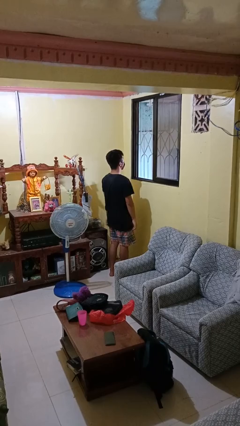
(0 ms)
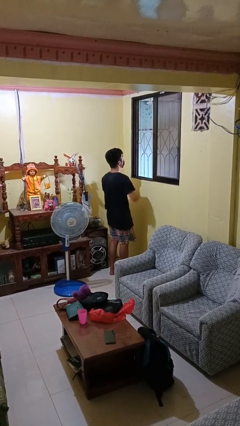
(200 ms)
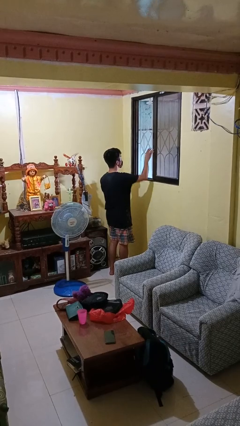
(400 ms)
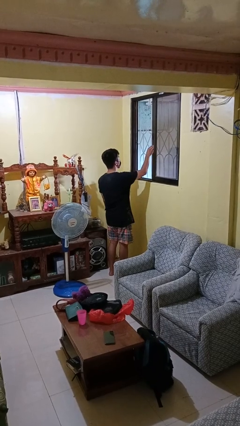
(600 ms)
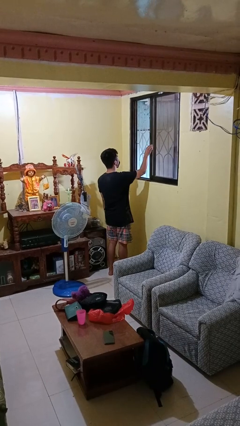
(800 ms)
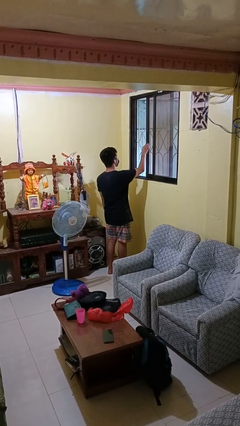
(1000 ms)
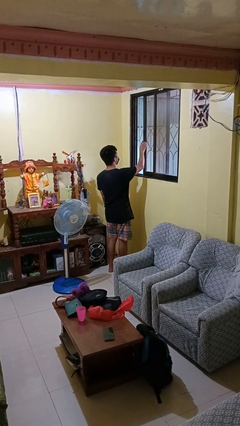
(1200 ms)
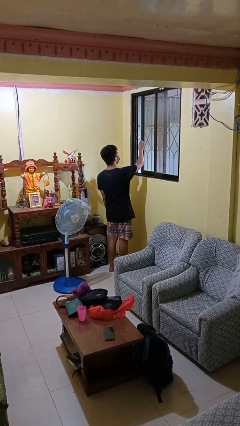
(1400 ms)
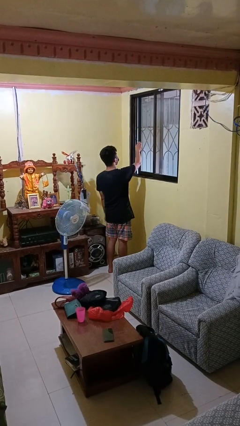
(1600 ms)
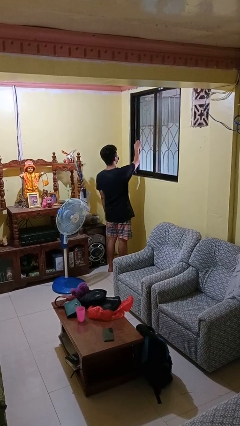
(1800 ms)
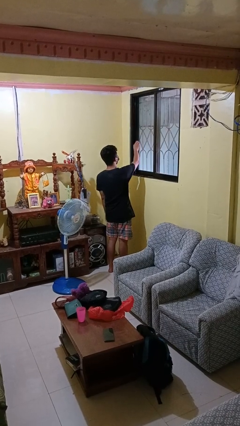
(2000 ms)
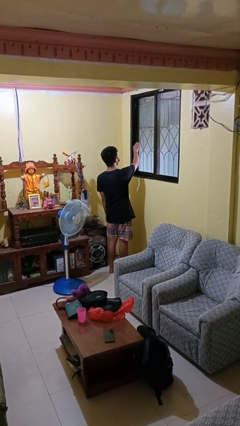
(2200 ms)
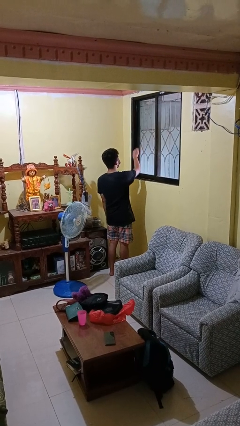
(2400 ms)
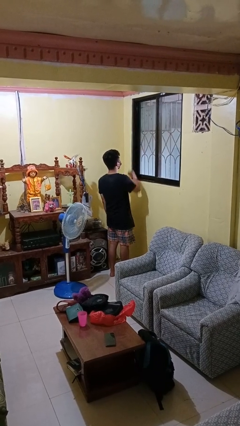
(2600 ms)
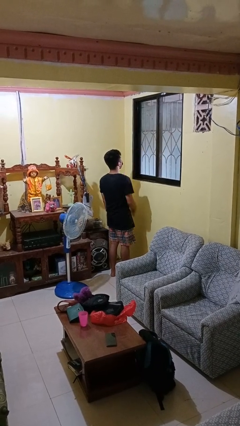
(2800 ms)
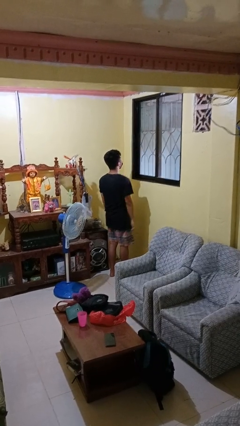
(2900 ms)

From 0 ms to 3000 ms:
person closes home window

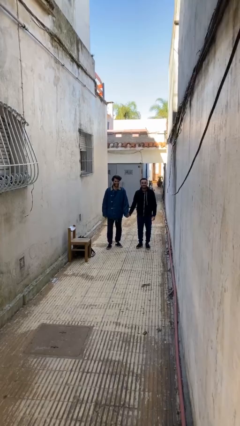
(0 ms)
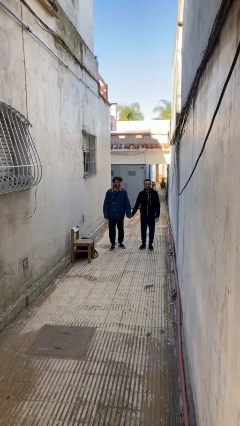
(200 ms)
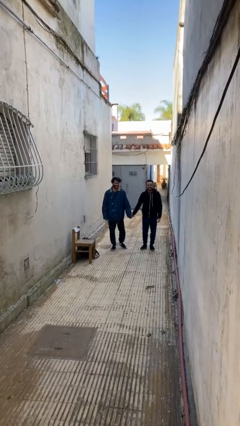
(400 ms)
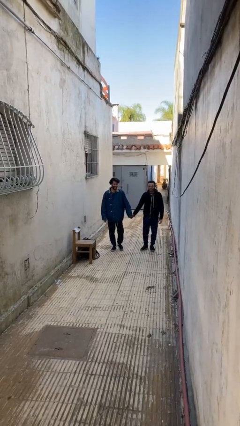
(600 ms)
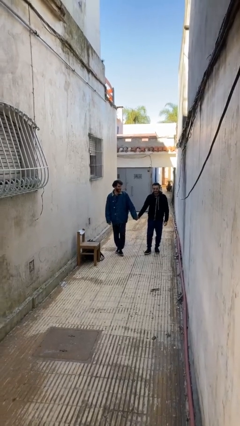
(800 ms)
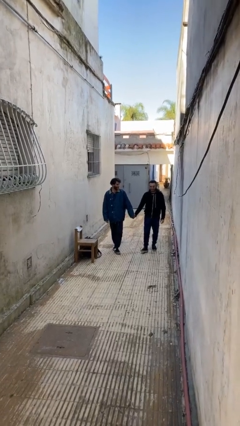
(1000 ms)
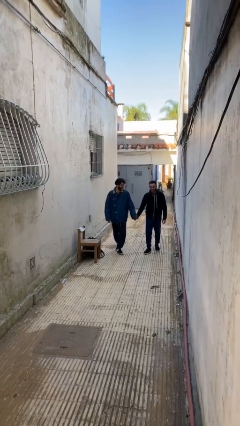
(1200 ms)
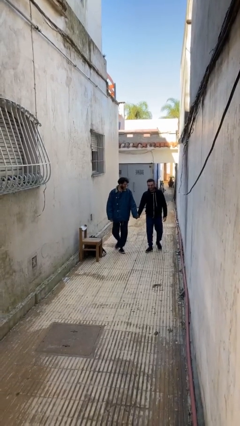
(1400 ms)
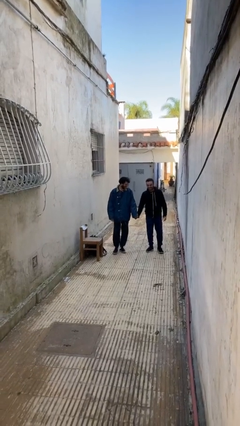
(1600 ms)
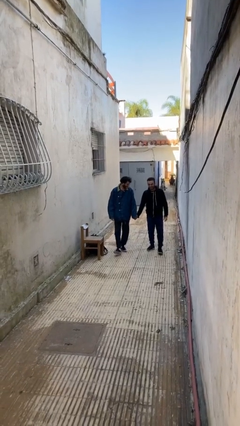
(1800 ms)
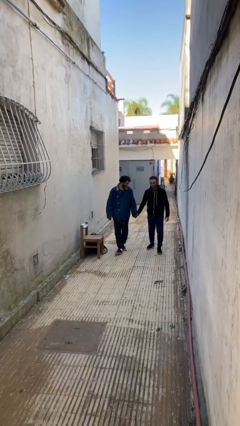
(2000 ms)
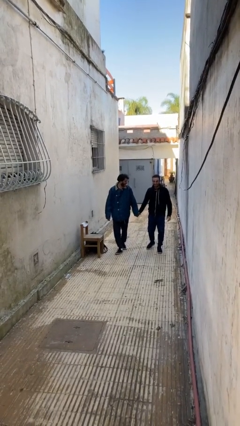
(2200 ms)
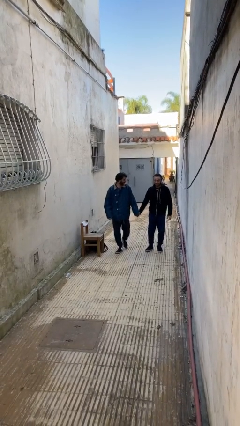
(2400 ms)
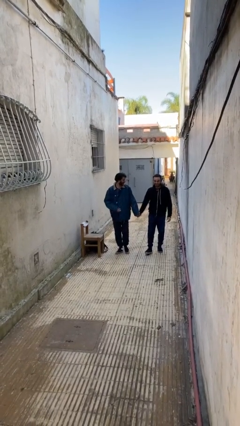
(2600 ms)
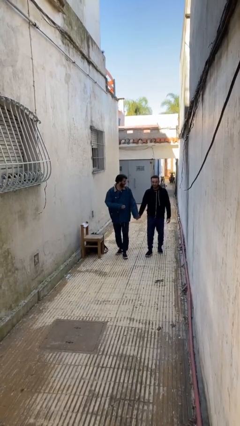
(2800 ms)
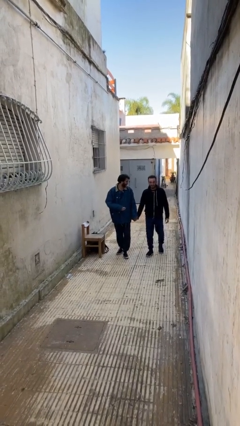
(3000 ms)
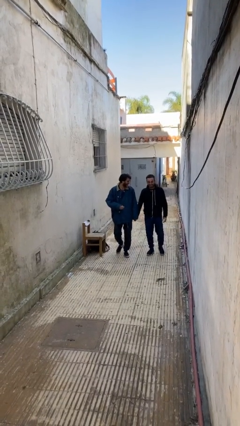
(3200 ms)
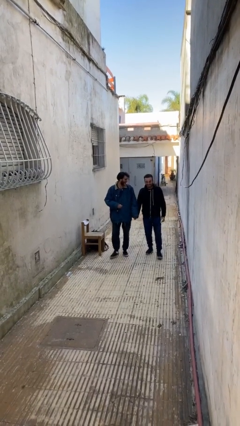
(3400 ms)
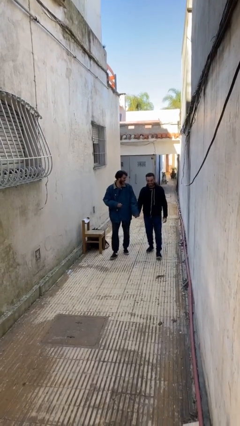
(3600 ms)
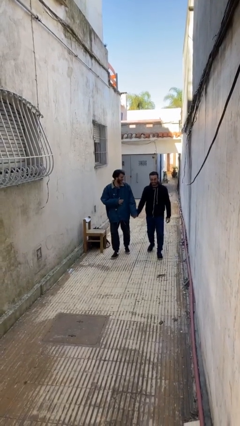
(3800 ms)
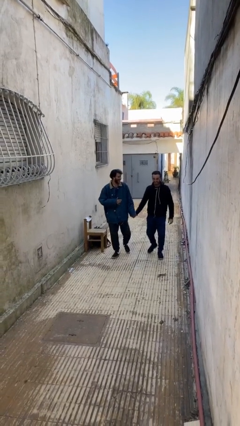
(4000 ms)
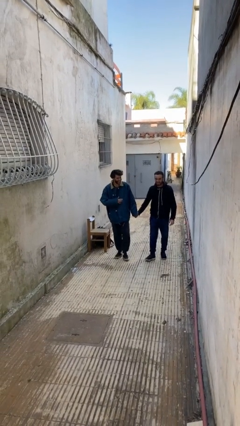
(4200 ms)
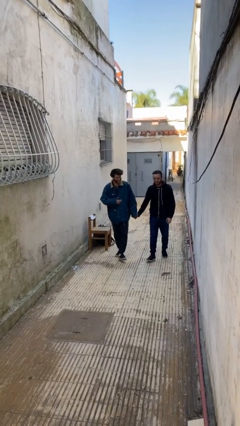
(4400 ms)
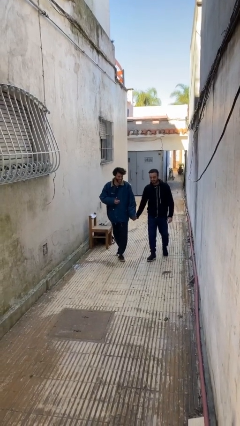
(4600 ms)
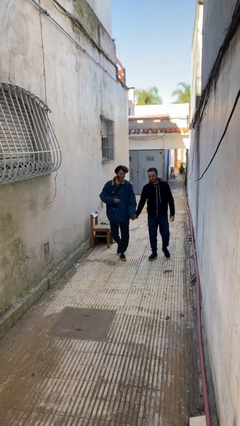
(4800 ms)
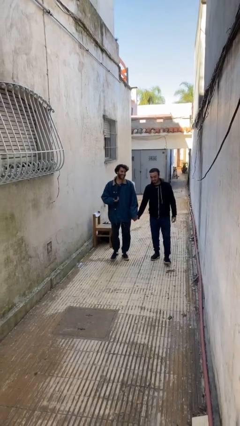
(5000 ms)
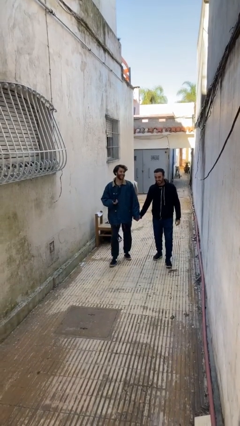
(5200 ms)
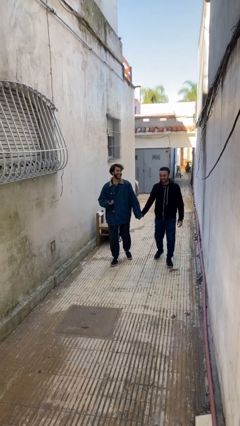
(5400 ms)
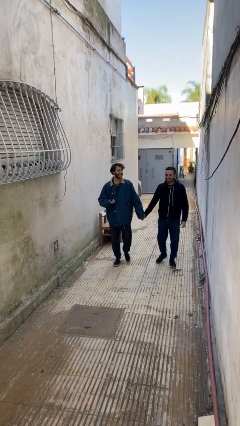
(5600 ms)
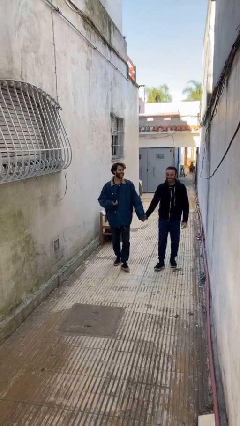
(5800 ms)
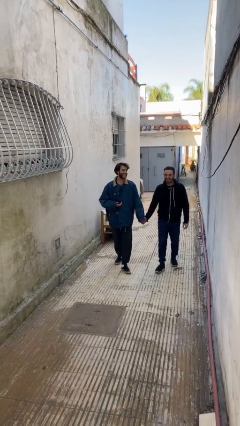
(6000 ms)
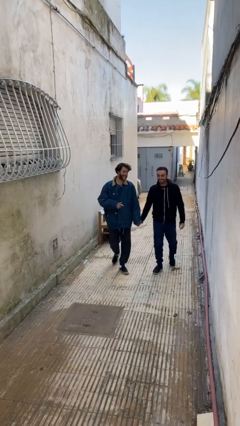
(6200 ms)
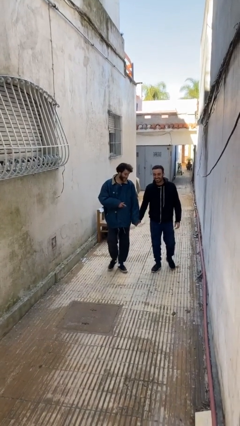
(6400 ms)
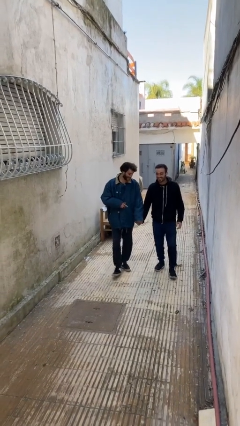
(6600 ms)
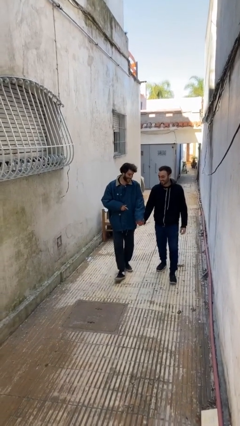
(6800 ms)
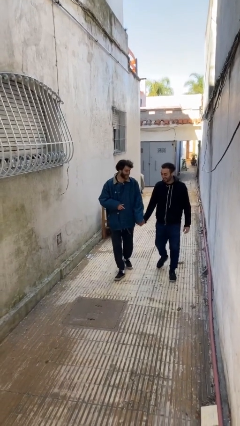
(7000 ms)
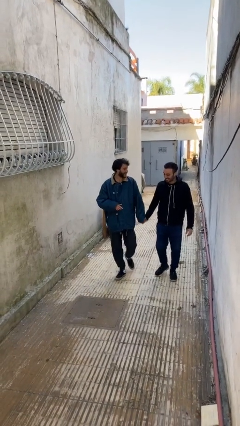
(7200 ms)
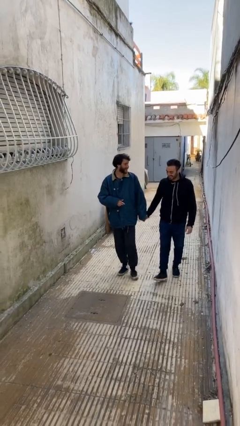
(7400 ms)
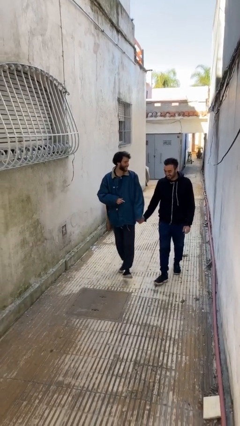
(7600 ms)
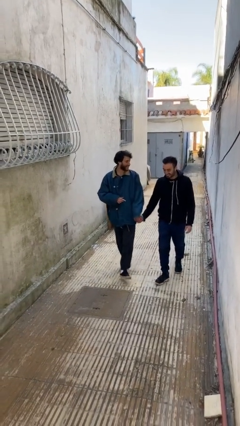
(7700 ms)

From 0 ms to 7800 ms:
person holds hand

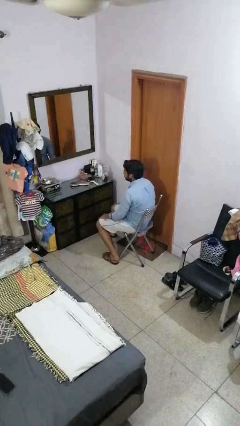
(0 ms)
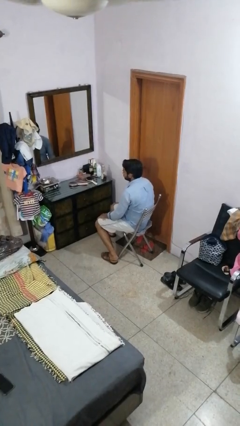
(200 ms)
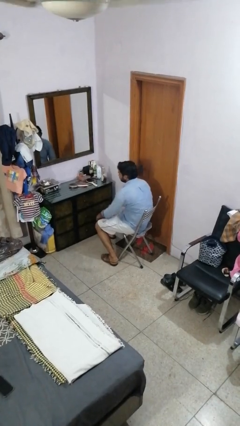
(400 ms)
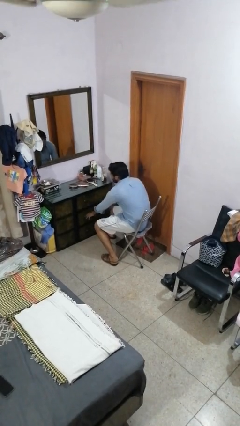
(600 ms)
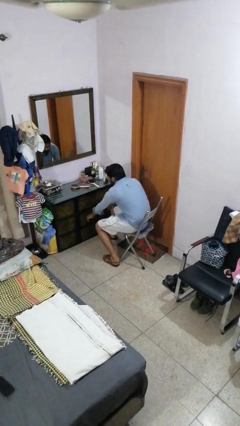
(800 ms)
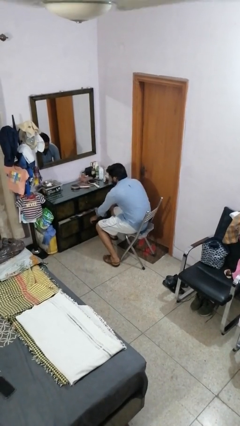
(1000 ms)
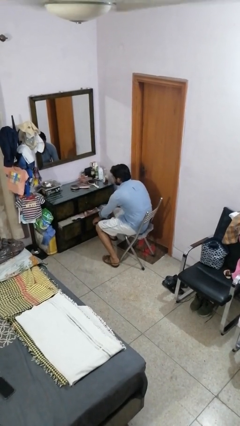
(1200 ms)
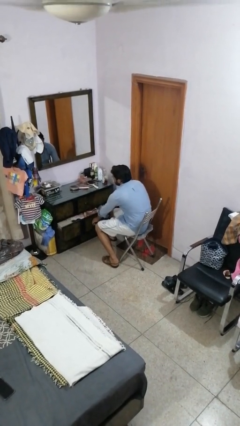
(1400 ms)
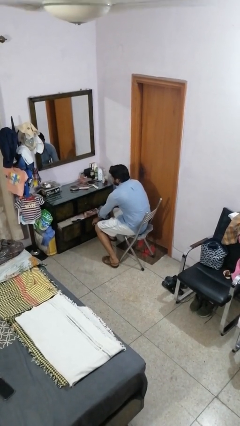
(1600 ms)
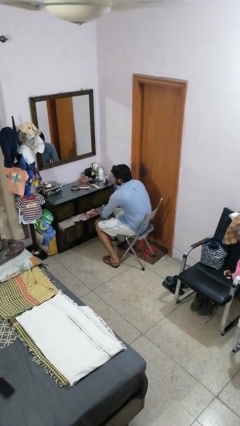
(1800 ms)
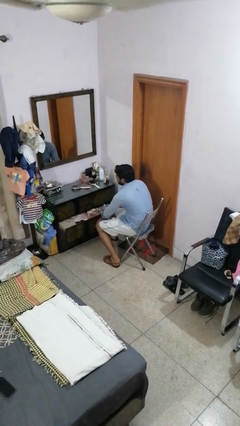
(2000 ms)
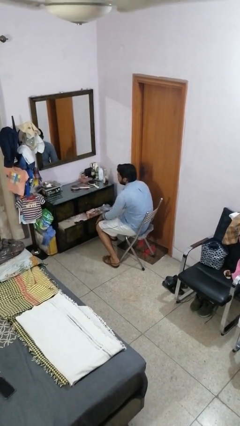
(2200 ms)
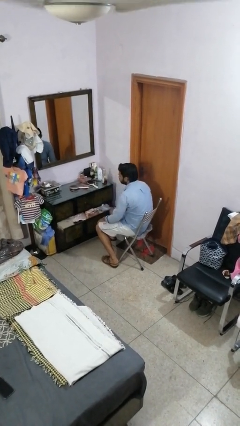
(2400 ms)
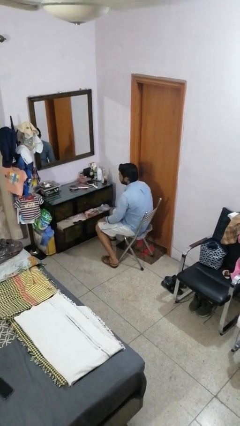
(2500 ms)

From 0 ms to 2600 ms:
person opens dresser drawer

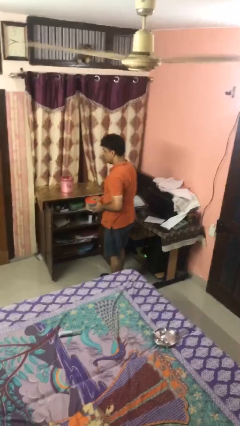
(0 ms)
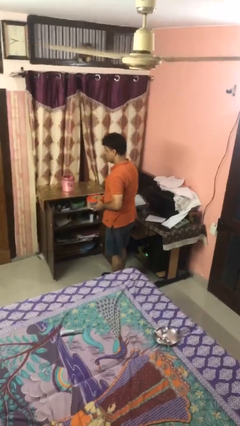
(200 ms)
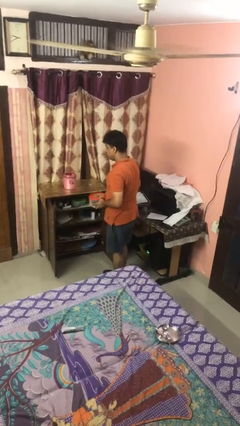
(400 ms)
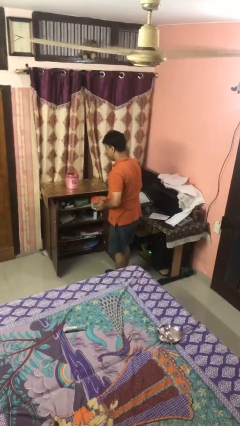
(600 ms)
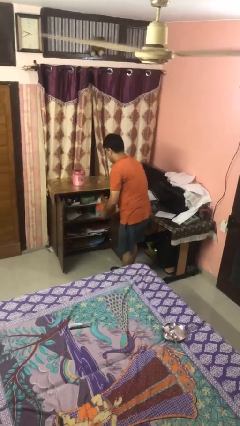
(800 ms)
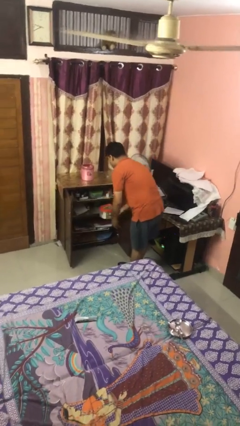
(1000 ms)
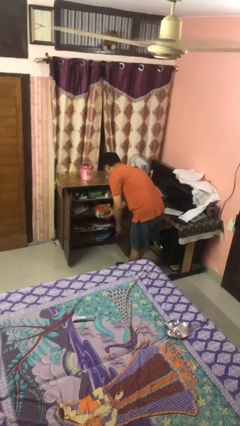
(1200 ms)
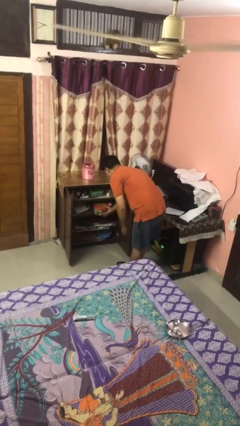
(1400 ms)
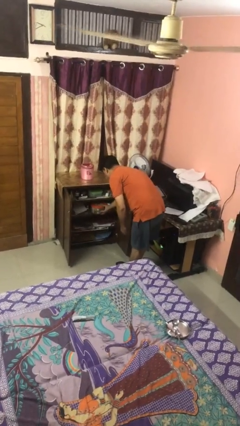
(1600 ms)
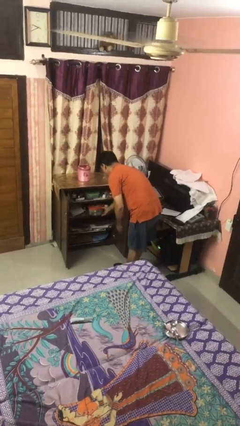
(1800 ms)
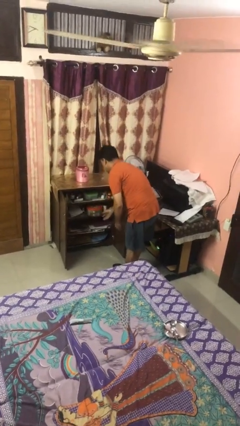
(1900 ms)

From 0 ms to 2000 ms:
person puts down object into cabinet

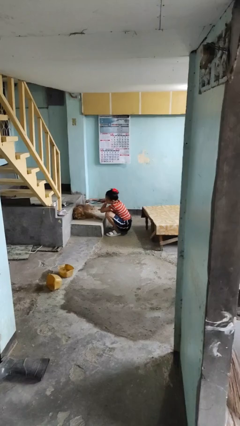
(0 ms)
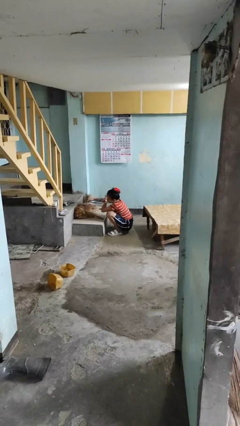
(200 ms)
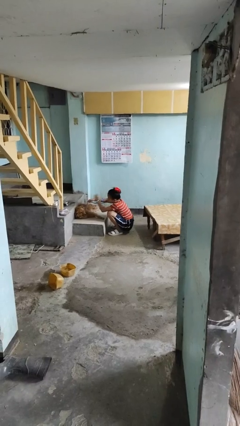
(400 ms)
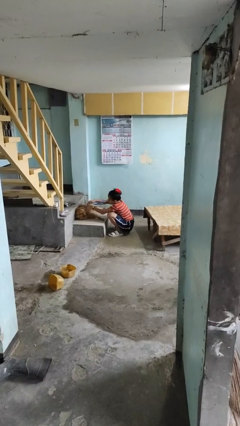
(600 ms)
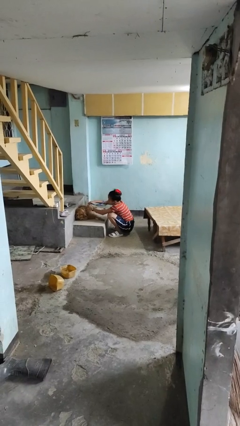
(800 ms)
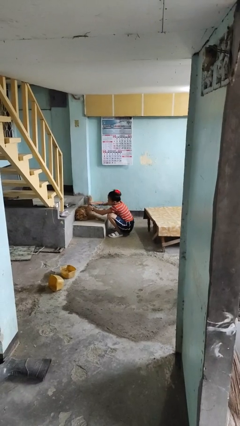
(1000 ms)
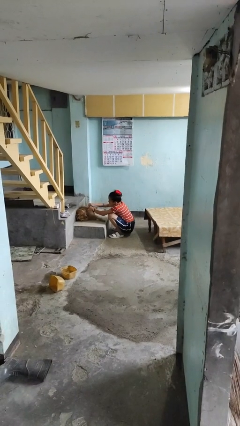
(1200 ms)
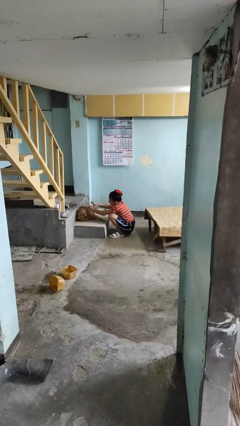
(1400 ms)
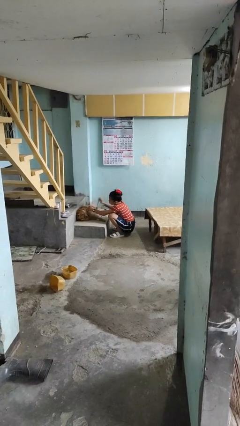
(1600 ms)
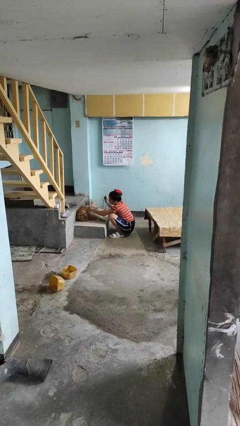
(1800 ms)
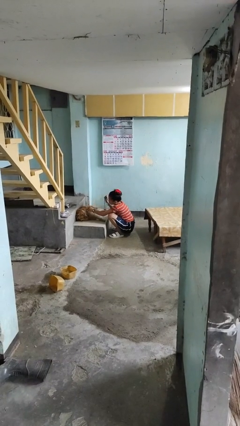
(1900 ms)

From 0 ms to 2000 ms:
person unattaches leash from dog

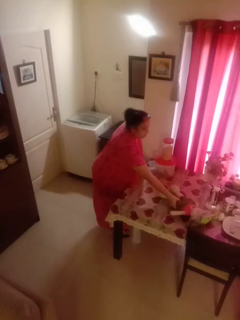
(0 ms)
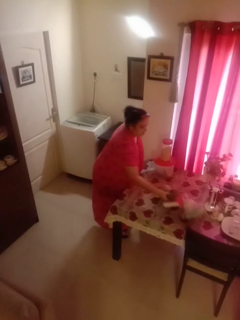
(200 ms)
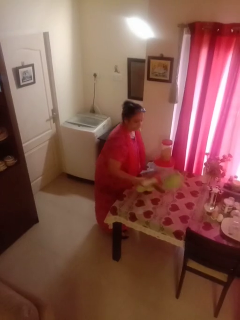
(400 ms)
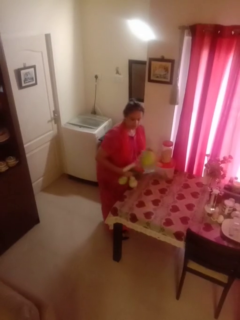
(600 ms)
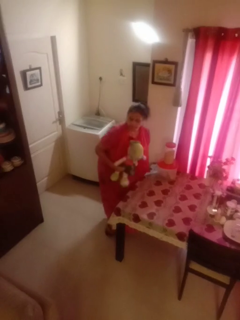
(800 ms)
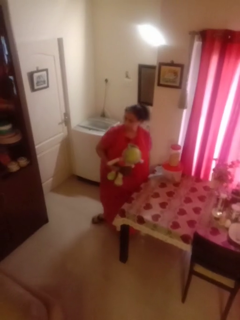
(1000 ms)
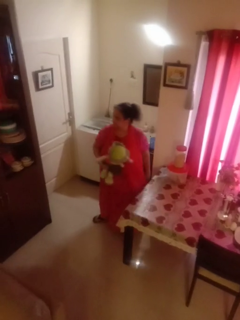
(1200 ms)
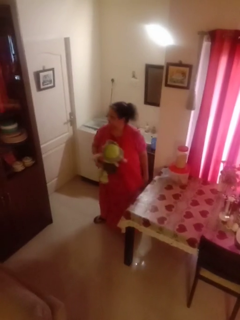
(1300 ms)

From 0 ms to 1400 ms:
person picks up object from table
